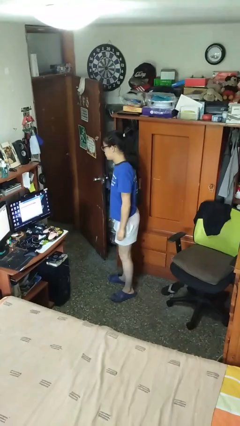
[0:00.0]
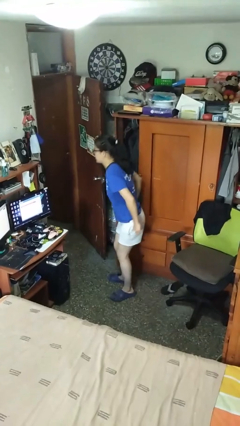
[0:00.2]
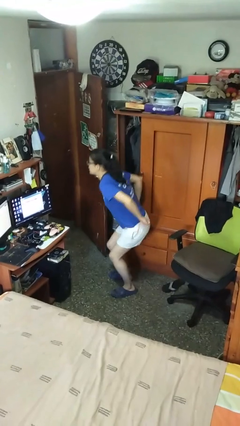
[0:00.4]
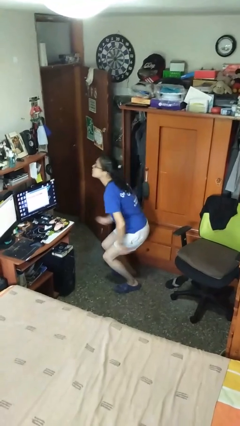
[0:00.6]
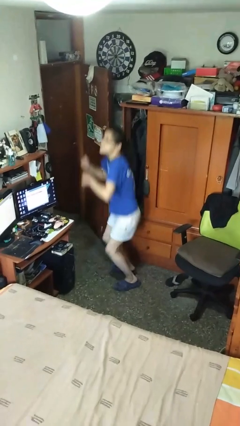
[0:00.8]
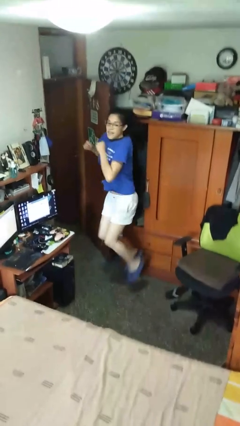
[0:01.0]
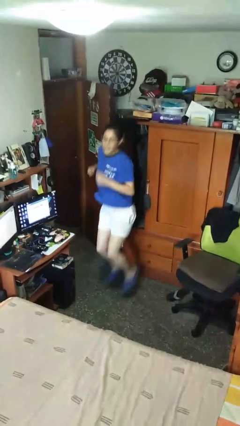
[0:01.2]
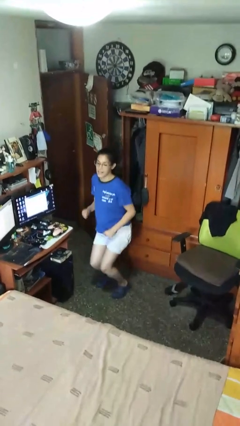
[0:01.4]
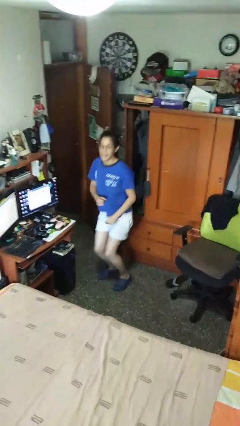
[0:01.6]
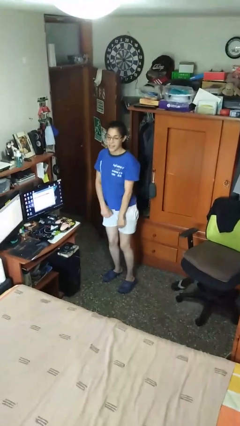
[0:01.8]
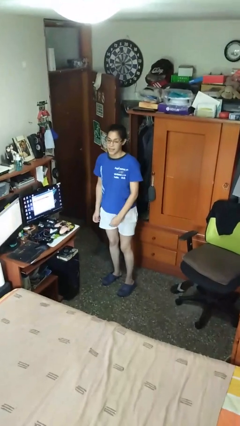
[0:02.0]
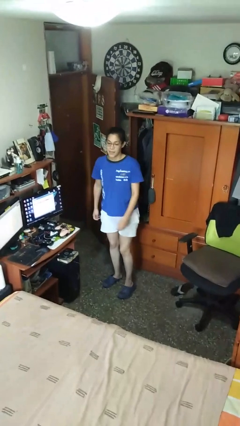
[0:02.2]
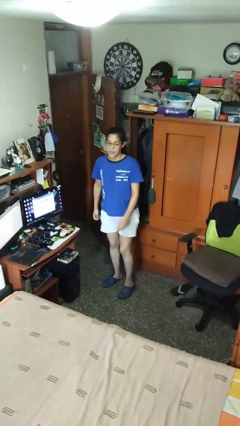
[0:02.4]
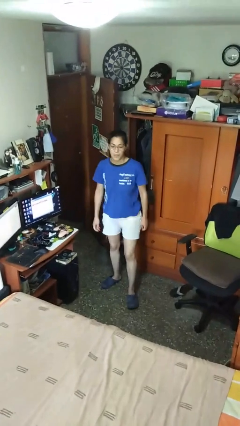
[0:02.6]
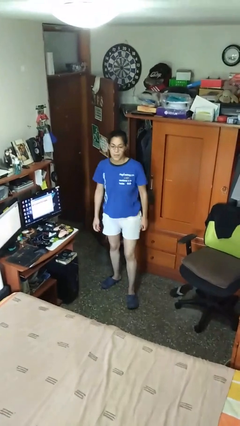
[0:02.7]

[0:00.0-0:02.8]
person jumps

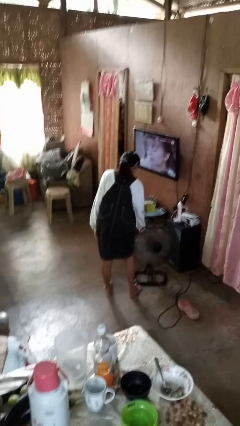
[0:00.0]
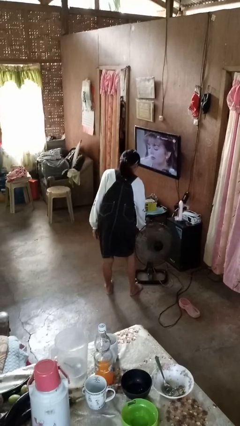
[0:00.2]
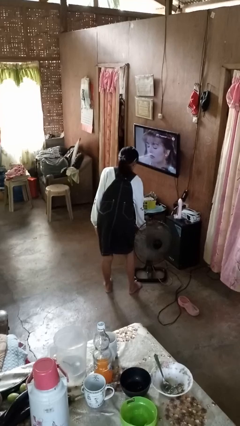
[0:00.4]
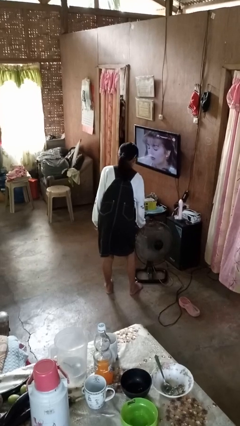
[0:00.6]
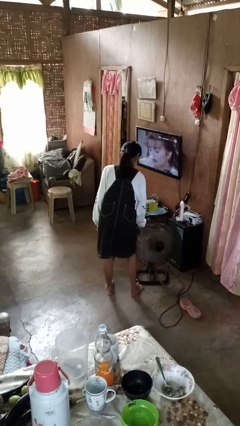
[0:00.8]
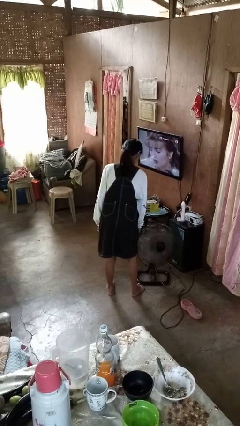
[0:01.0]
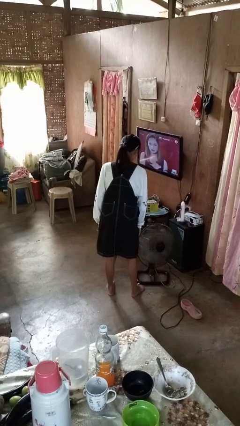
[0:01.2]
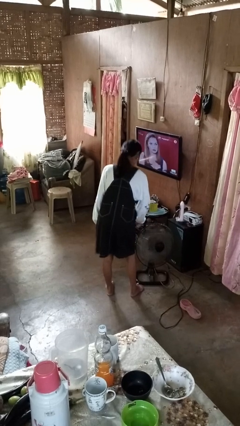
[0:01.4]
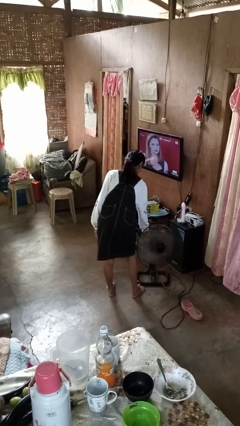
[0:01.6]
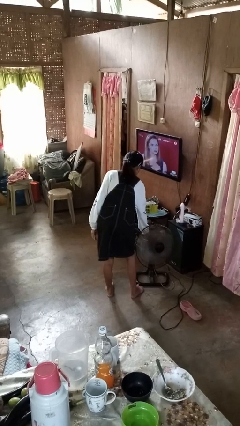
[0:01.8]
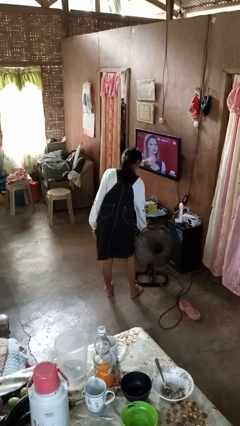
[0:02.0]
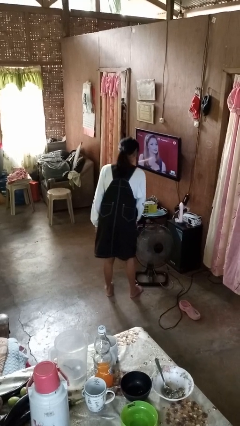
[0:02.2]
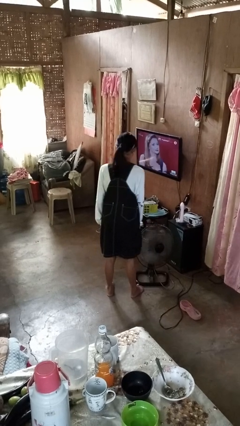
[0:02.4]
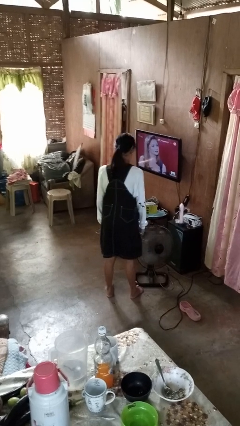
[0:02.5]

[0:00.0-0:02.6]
person turns off fan

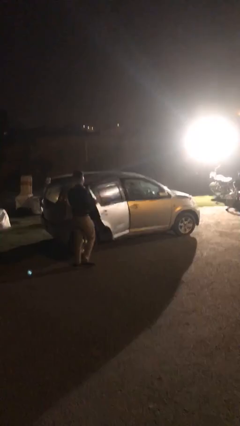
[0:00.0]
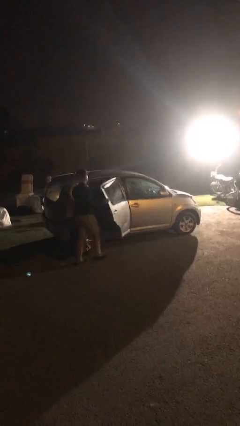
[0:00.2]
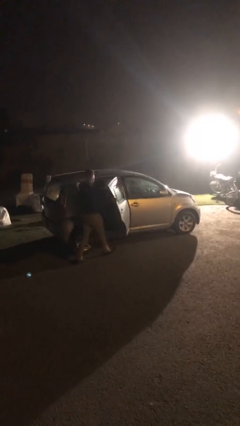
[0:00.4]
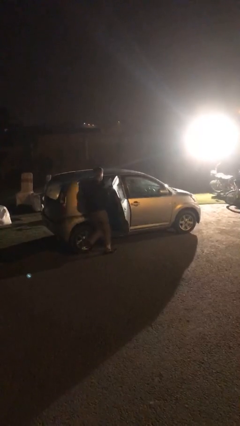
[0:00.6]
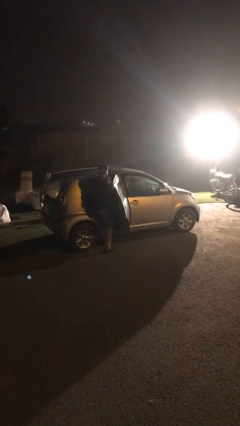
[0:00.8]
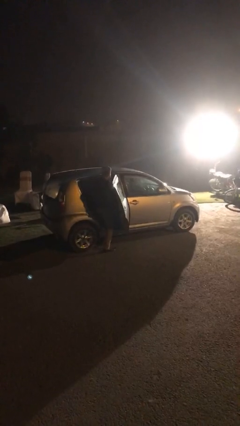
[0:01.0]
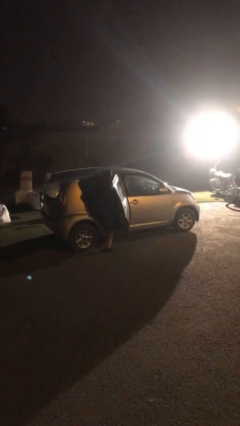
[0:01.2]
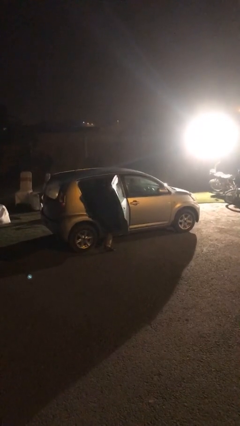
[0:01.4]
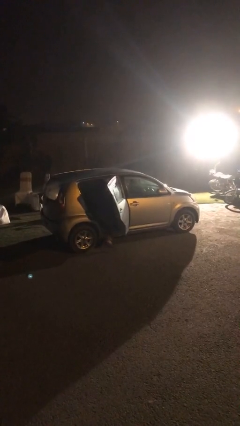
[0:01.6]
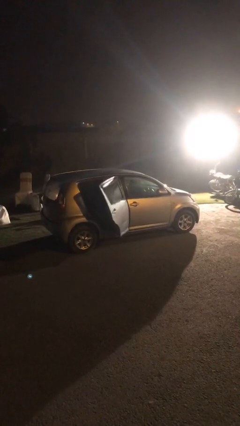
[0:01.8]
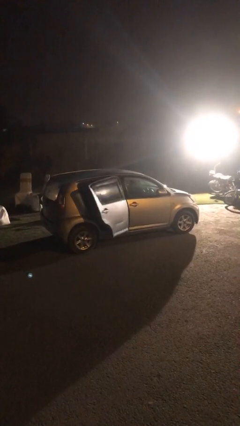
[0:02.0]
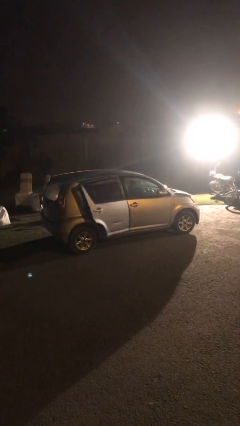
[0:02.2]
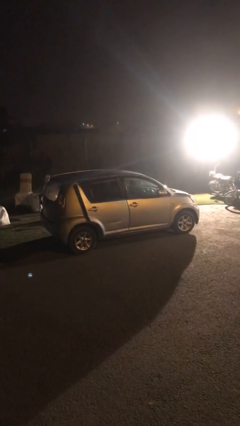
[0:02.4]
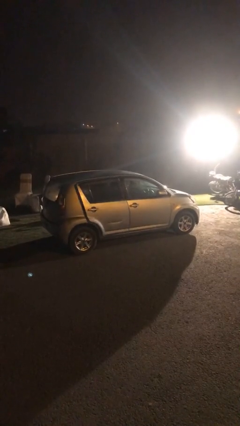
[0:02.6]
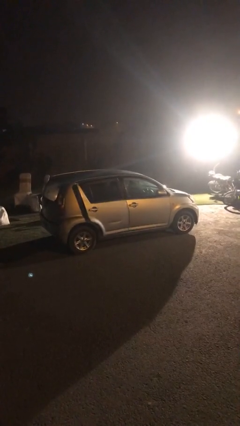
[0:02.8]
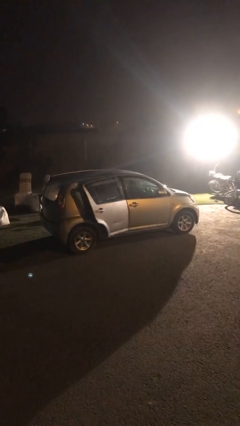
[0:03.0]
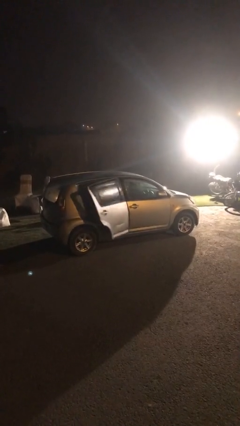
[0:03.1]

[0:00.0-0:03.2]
car picks up person

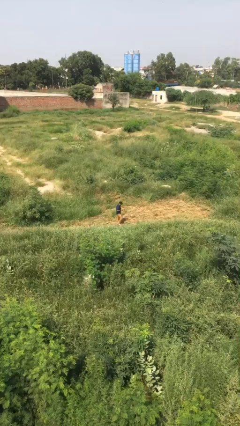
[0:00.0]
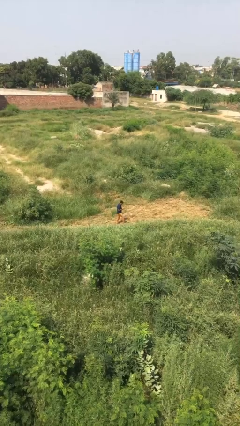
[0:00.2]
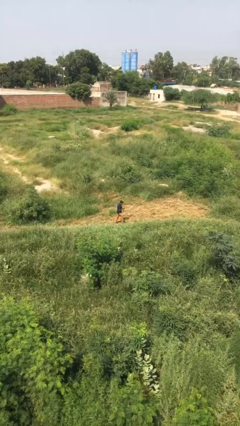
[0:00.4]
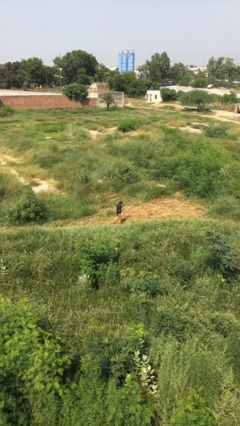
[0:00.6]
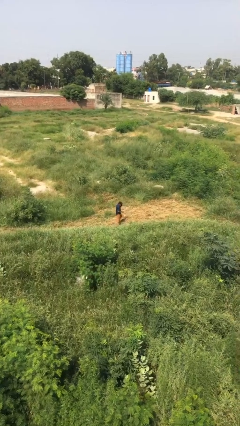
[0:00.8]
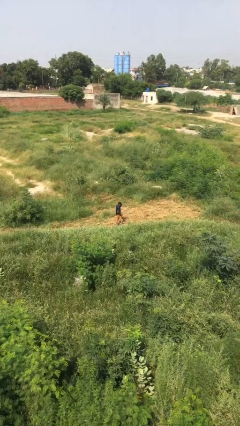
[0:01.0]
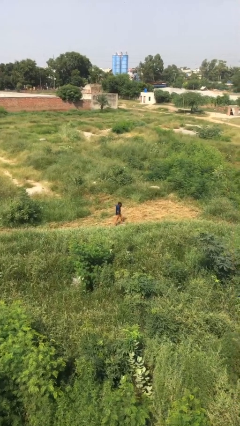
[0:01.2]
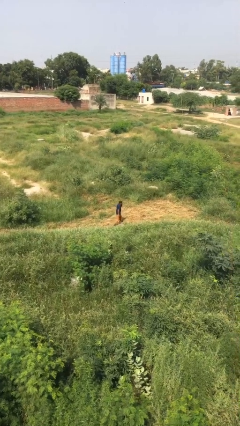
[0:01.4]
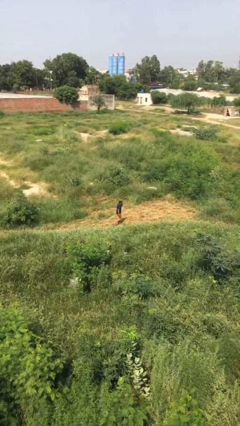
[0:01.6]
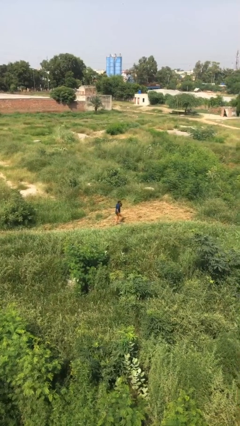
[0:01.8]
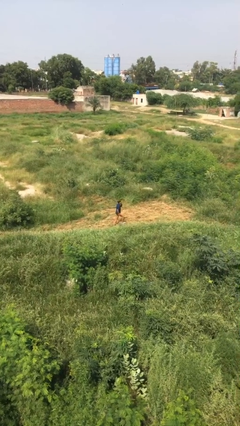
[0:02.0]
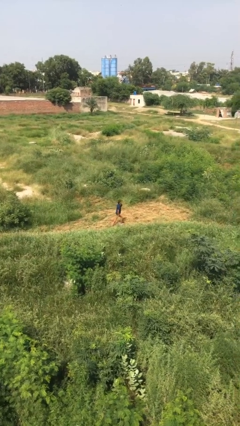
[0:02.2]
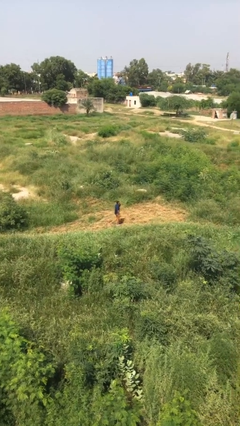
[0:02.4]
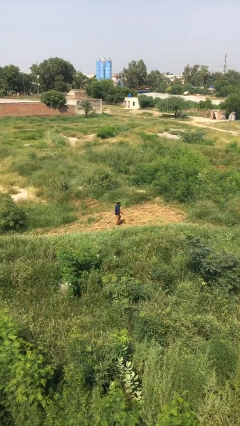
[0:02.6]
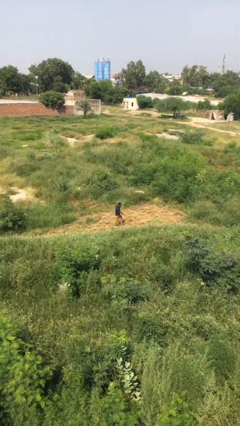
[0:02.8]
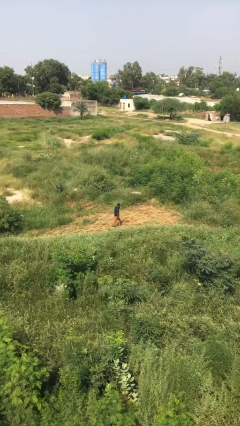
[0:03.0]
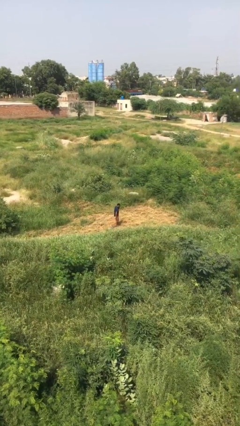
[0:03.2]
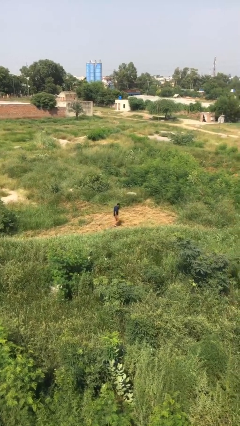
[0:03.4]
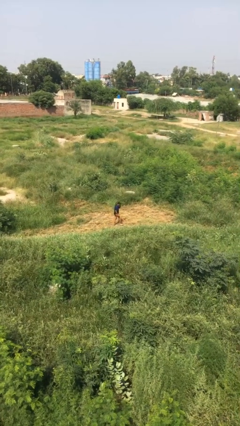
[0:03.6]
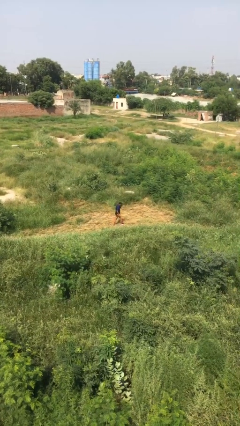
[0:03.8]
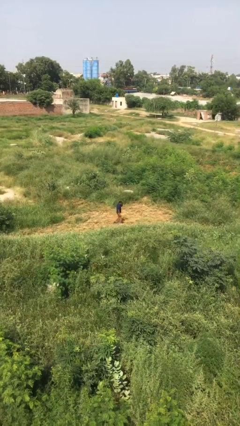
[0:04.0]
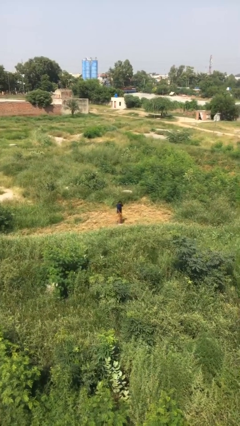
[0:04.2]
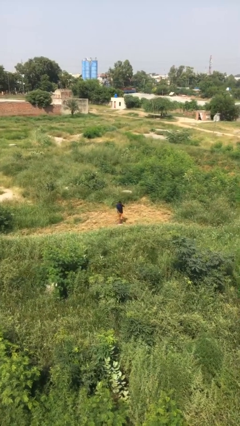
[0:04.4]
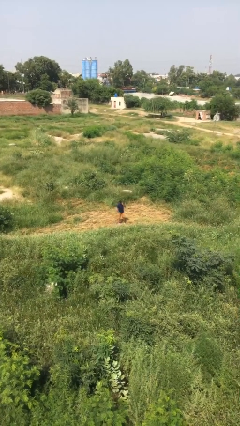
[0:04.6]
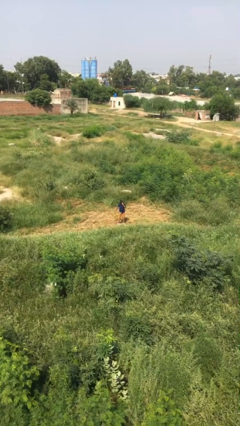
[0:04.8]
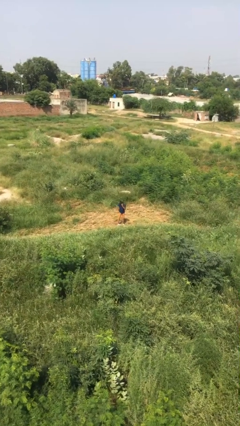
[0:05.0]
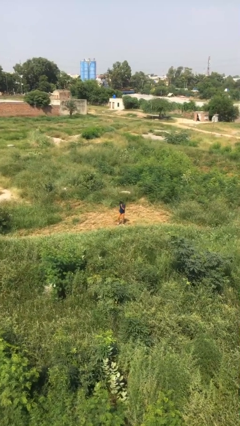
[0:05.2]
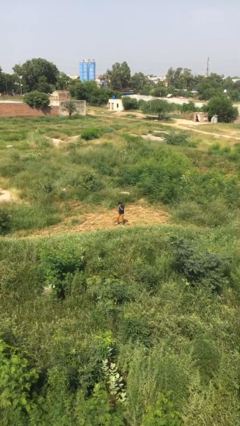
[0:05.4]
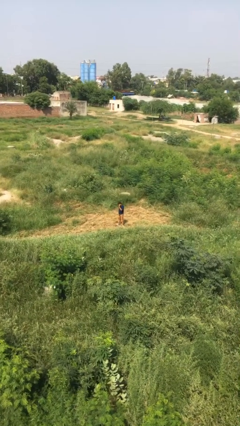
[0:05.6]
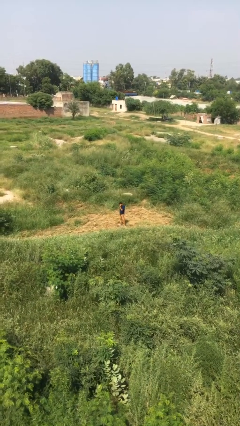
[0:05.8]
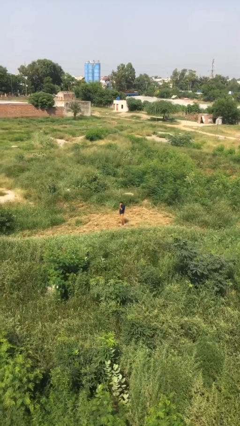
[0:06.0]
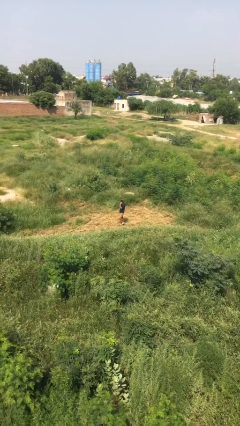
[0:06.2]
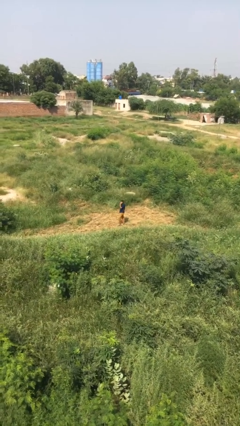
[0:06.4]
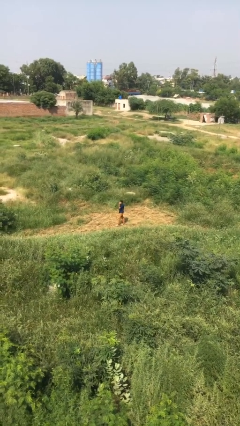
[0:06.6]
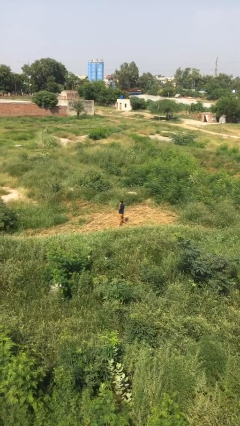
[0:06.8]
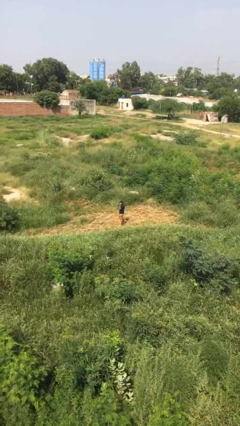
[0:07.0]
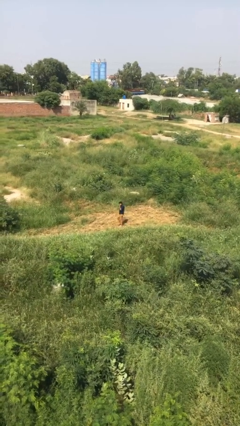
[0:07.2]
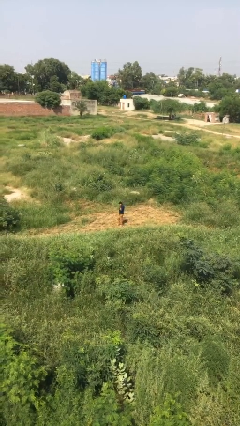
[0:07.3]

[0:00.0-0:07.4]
person talks on phone

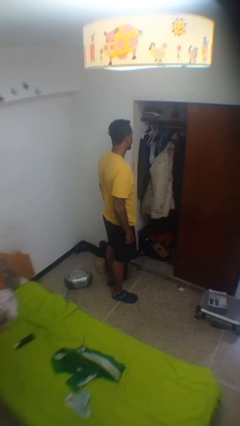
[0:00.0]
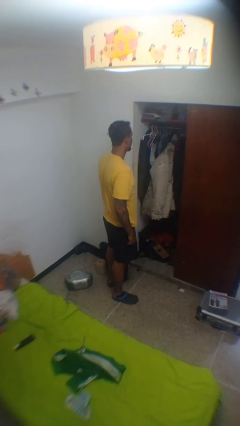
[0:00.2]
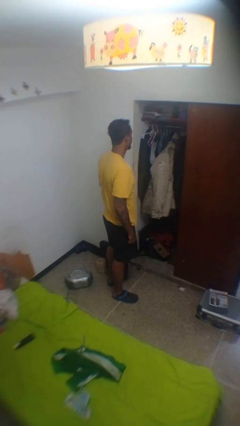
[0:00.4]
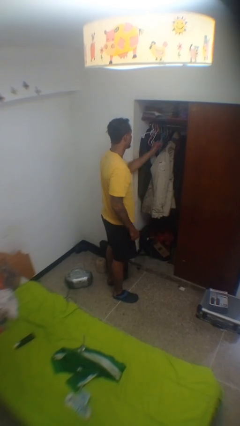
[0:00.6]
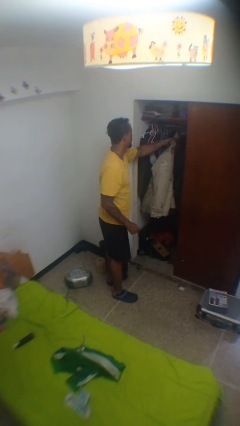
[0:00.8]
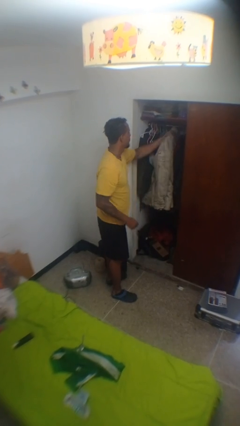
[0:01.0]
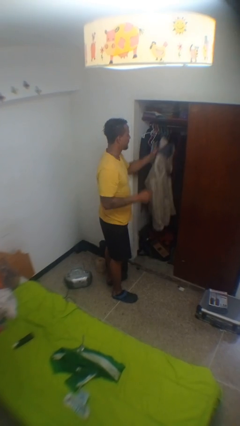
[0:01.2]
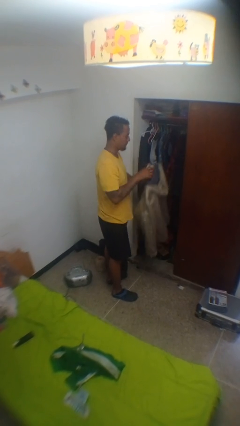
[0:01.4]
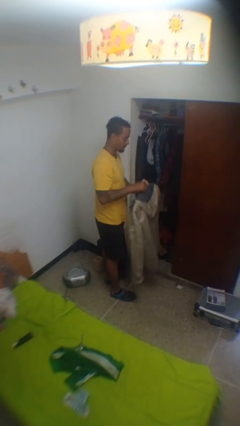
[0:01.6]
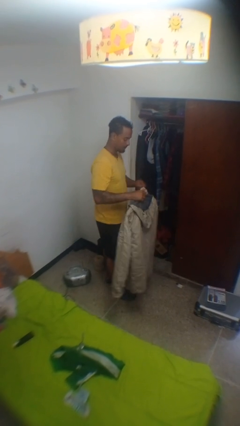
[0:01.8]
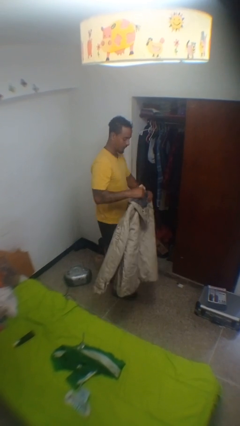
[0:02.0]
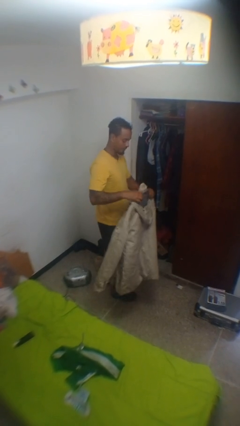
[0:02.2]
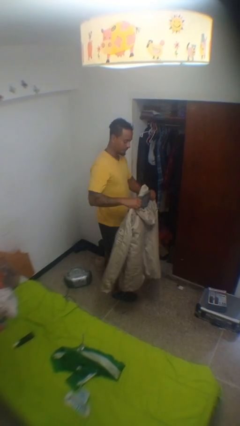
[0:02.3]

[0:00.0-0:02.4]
person takes clothes from closet
